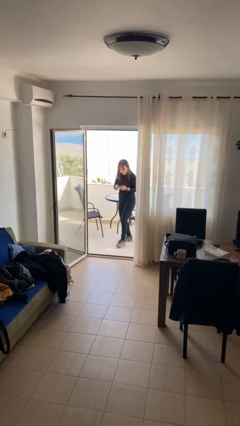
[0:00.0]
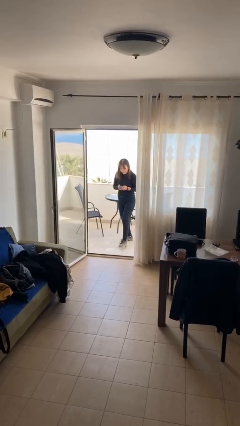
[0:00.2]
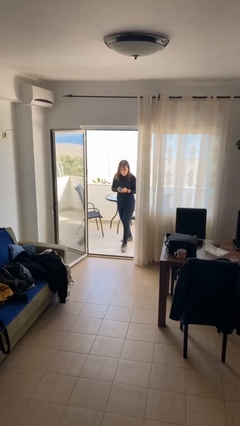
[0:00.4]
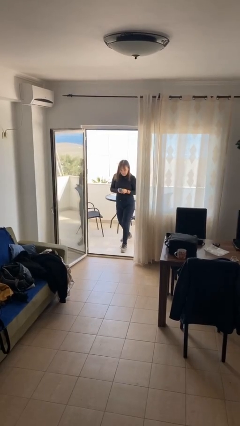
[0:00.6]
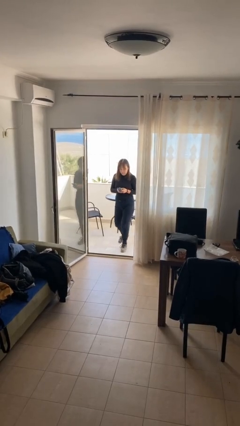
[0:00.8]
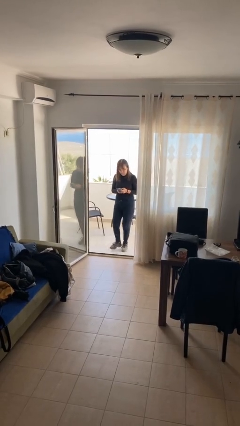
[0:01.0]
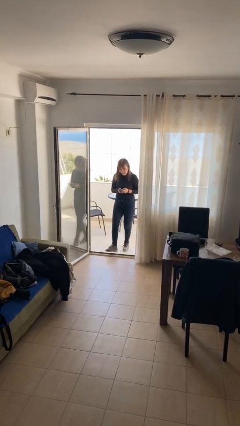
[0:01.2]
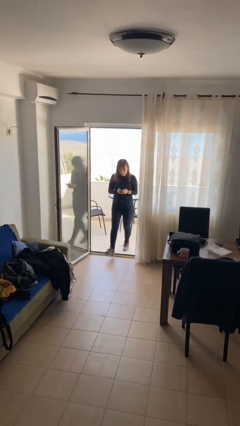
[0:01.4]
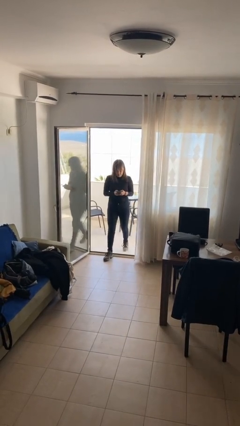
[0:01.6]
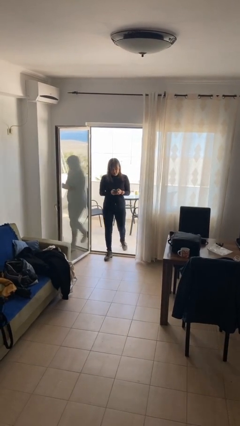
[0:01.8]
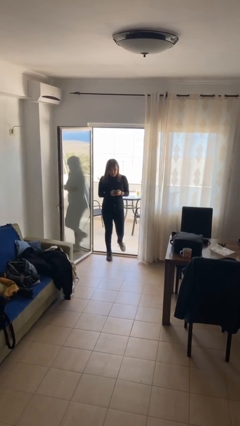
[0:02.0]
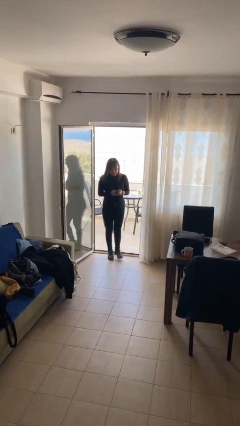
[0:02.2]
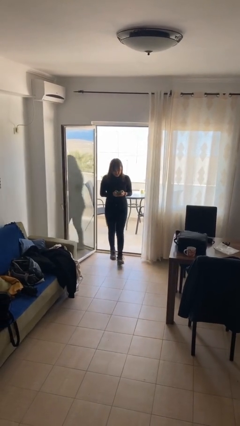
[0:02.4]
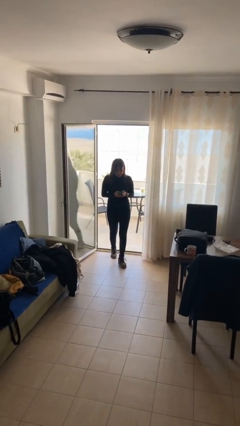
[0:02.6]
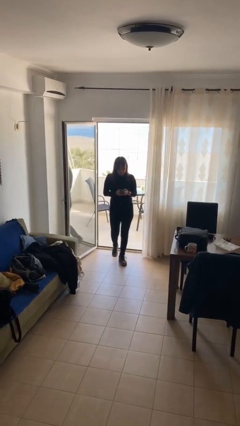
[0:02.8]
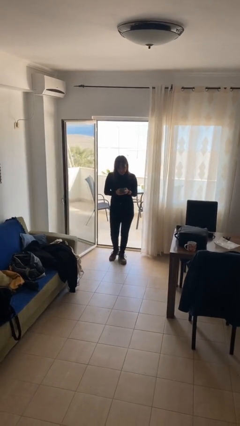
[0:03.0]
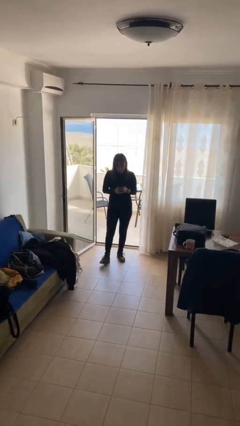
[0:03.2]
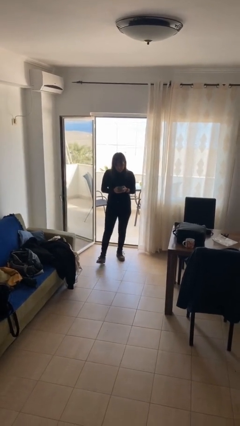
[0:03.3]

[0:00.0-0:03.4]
person enters scene through structure

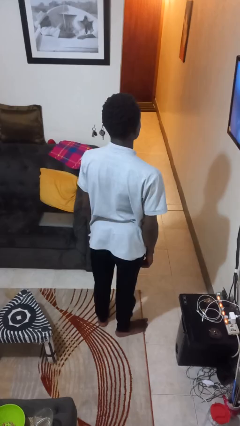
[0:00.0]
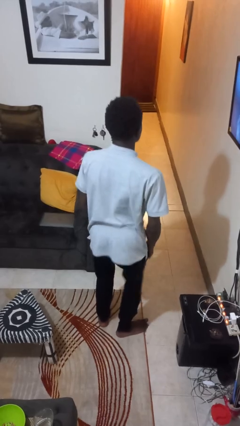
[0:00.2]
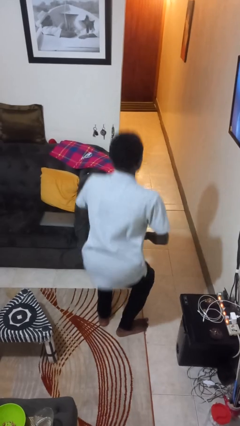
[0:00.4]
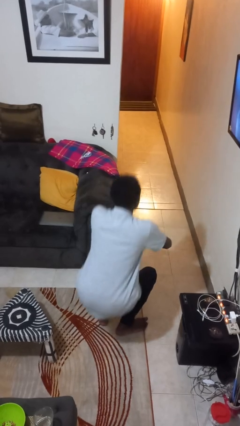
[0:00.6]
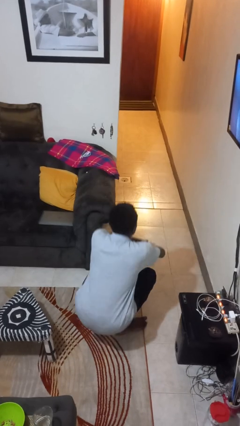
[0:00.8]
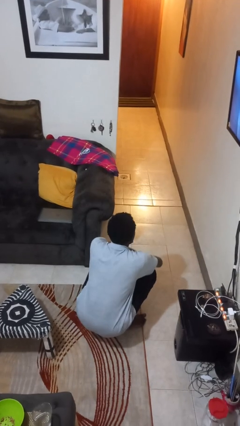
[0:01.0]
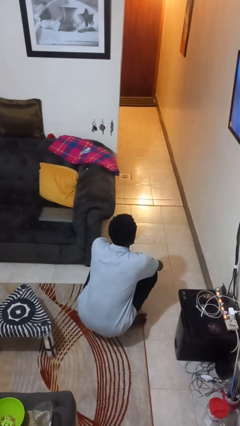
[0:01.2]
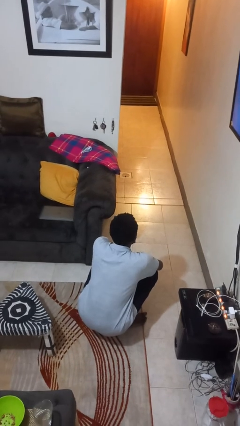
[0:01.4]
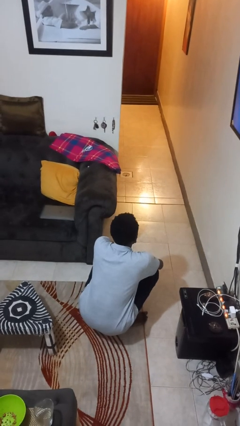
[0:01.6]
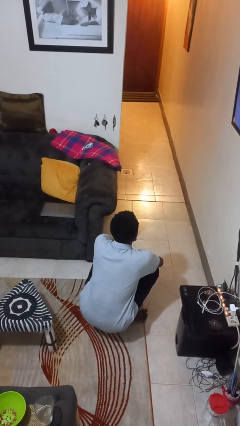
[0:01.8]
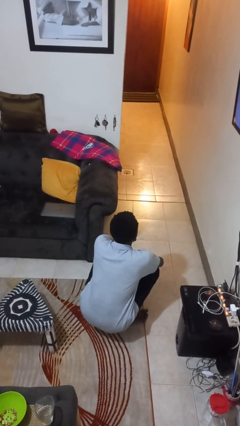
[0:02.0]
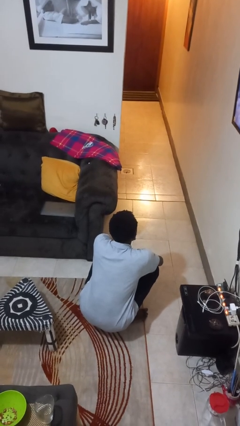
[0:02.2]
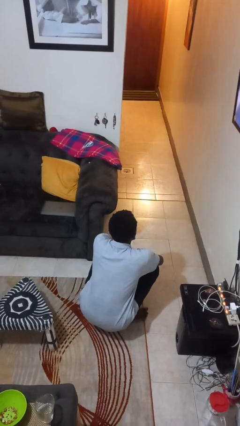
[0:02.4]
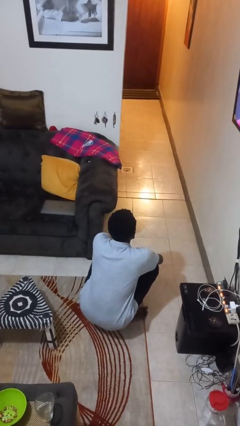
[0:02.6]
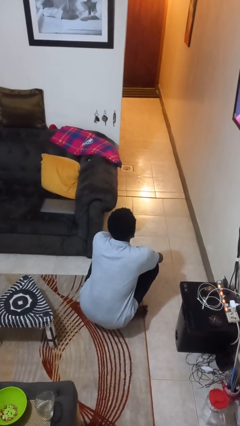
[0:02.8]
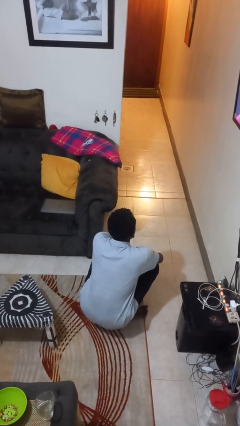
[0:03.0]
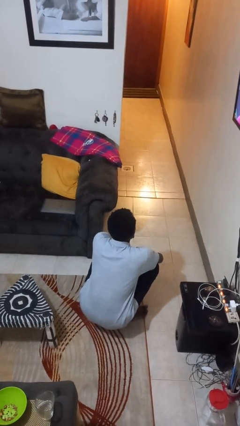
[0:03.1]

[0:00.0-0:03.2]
person squats

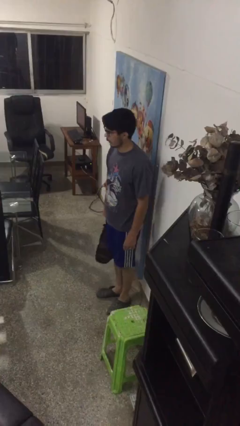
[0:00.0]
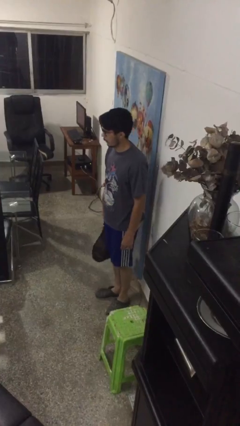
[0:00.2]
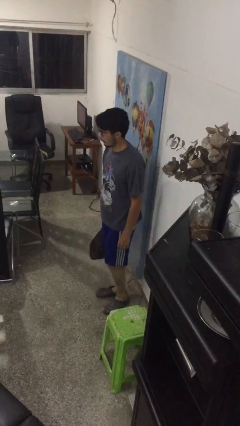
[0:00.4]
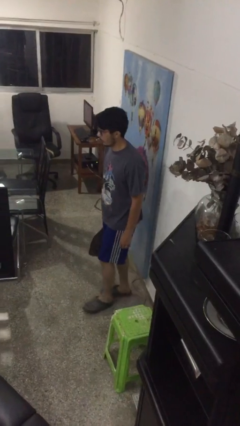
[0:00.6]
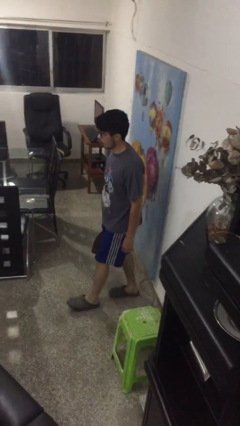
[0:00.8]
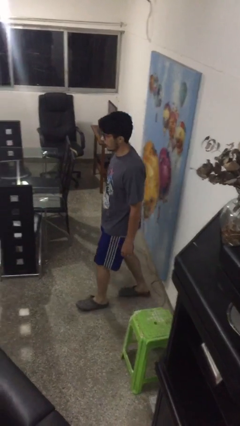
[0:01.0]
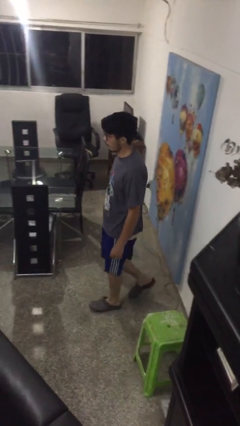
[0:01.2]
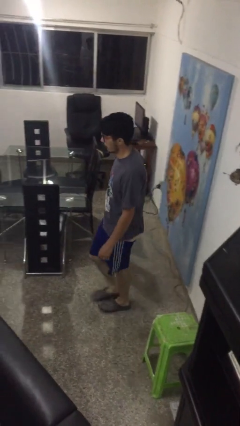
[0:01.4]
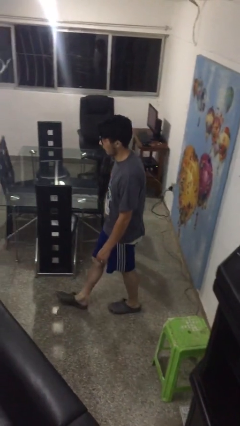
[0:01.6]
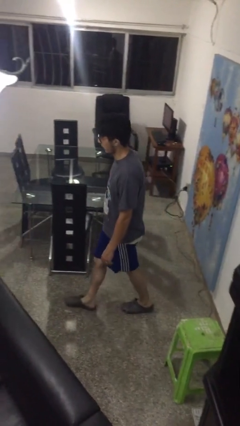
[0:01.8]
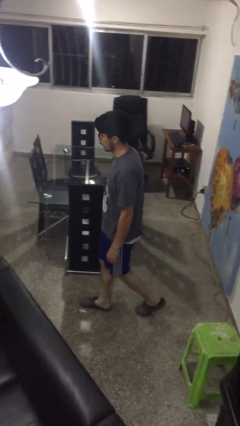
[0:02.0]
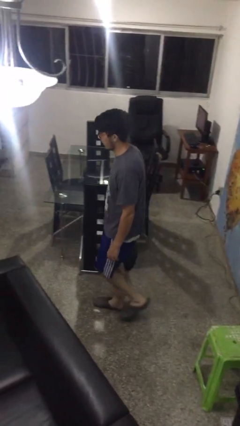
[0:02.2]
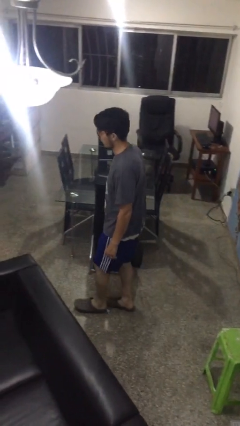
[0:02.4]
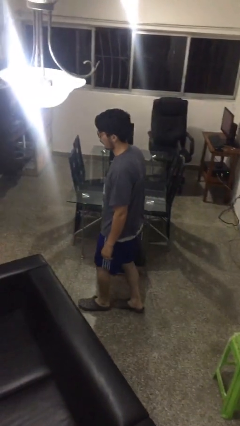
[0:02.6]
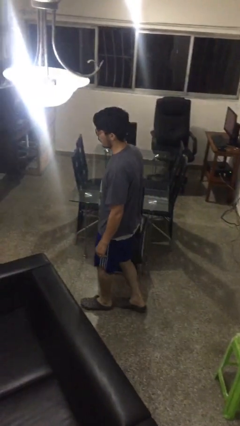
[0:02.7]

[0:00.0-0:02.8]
person carries groceries

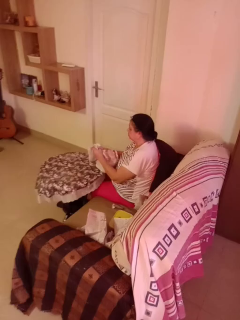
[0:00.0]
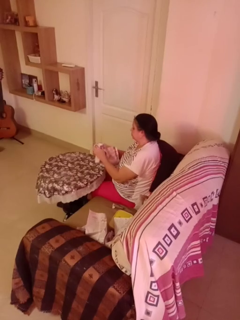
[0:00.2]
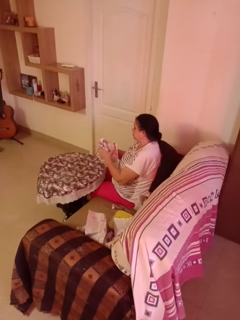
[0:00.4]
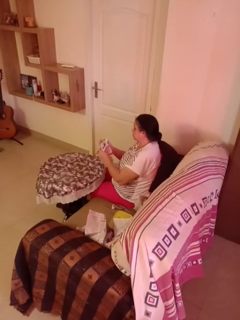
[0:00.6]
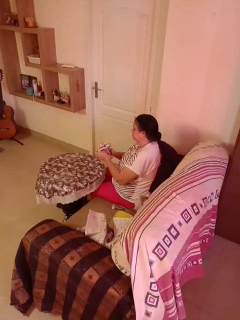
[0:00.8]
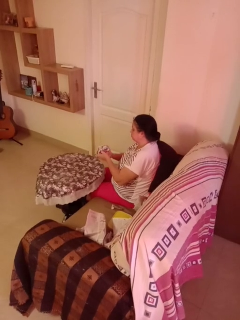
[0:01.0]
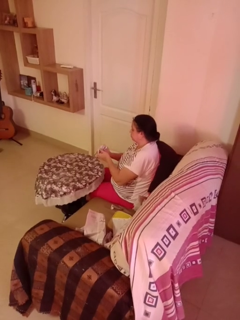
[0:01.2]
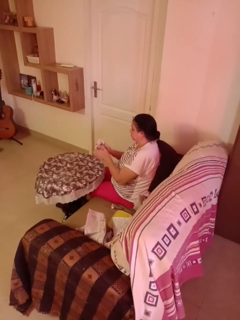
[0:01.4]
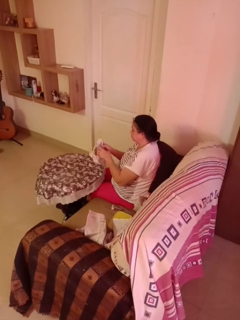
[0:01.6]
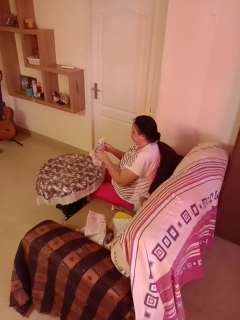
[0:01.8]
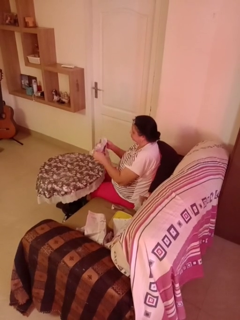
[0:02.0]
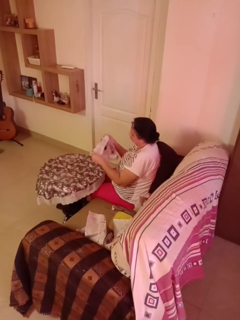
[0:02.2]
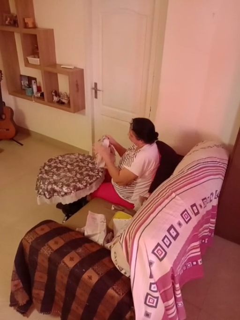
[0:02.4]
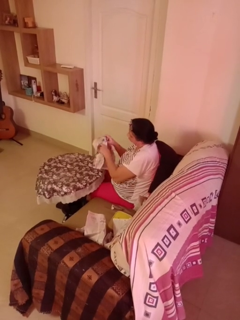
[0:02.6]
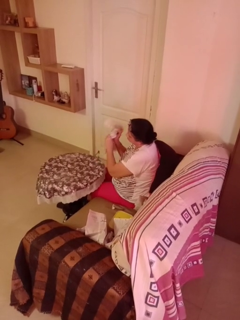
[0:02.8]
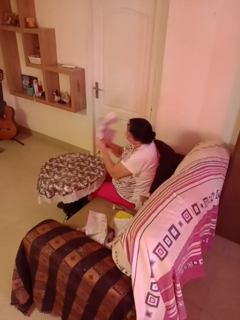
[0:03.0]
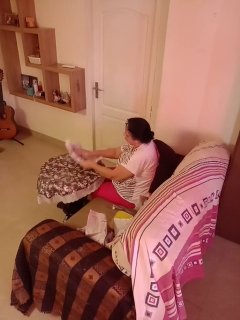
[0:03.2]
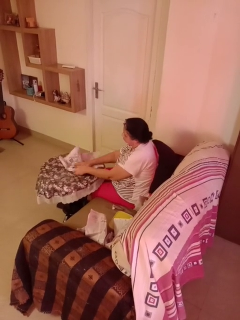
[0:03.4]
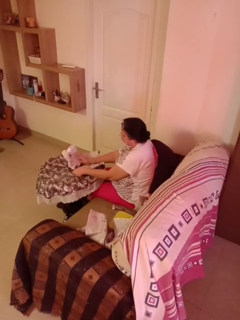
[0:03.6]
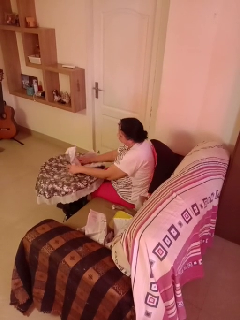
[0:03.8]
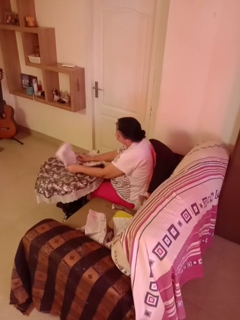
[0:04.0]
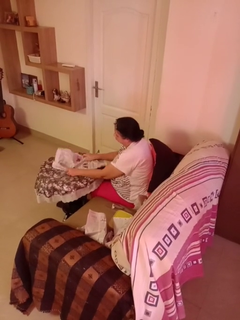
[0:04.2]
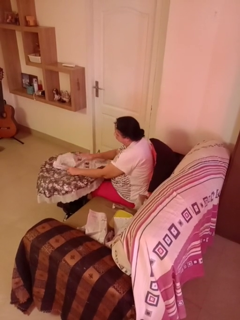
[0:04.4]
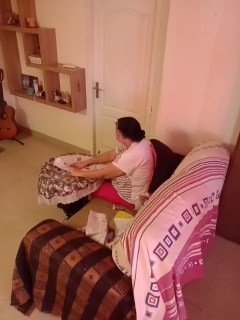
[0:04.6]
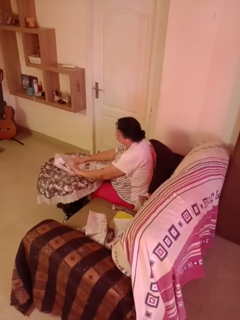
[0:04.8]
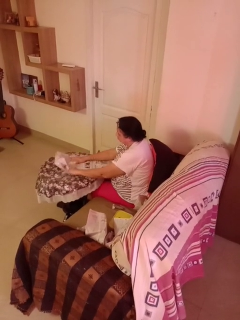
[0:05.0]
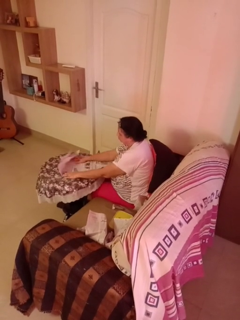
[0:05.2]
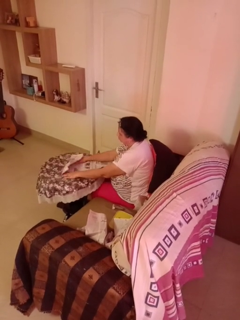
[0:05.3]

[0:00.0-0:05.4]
person crumples paper

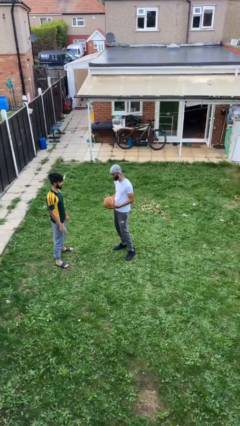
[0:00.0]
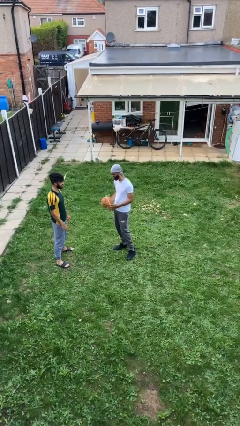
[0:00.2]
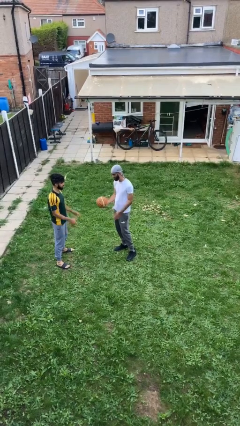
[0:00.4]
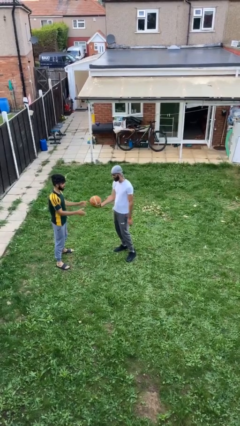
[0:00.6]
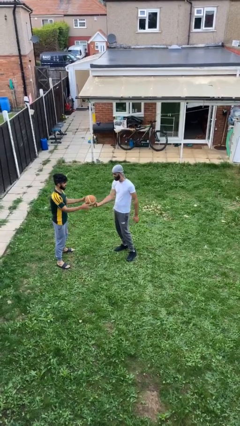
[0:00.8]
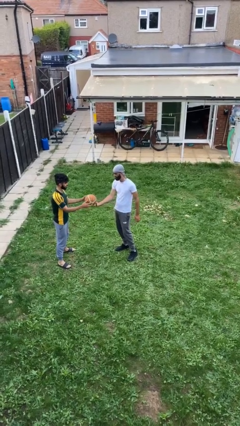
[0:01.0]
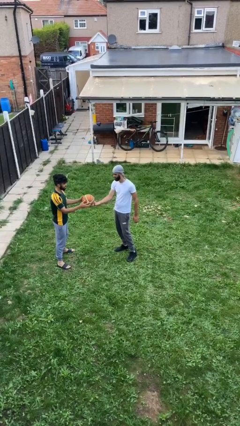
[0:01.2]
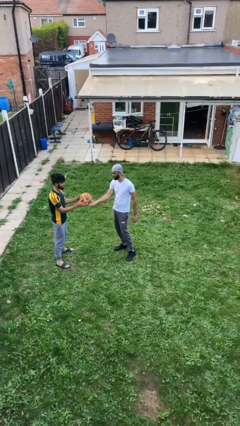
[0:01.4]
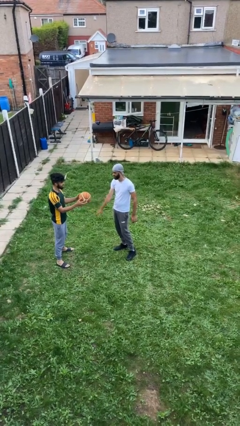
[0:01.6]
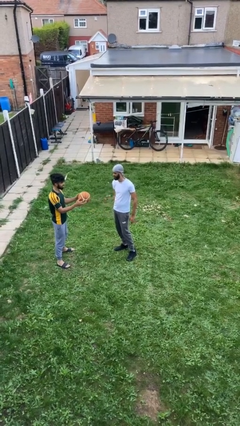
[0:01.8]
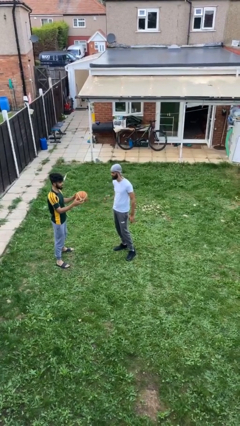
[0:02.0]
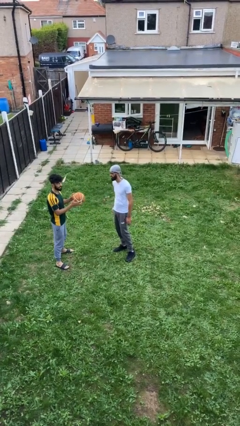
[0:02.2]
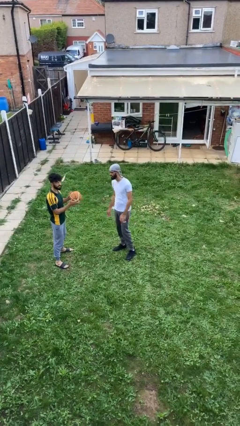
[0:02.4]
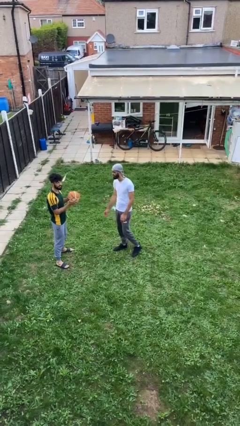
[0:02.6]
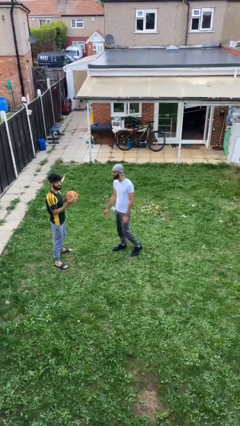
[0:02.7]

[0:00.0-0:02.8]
person transfers object to person

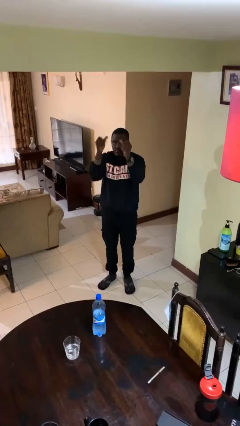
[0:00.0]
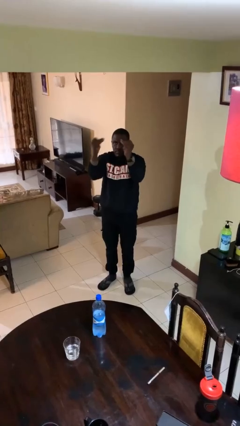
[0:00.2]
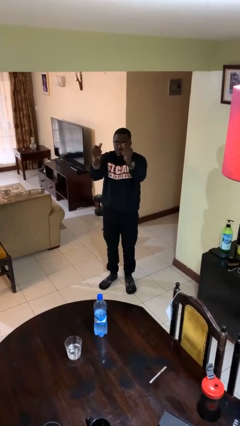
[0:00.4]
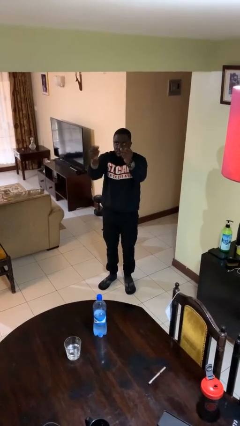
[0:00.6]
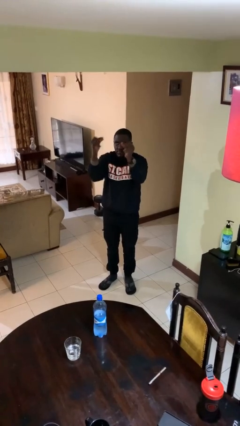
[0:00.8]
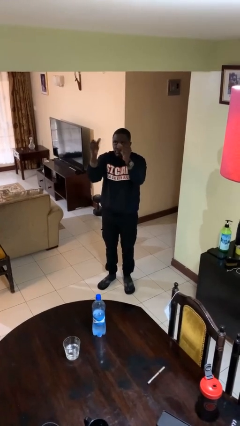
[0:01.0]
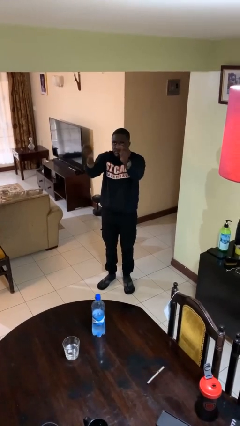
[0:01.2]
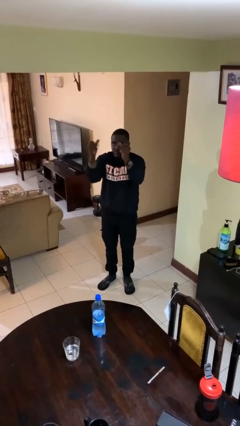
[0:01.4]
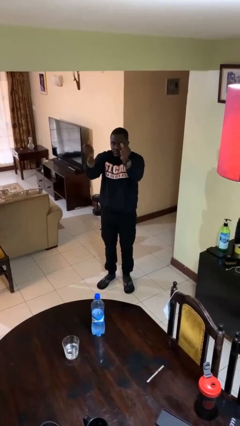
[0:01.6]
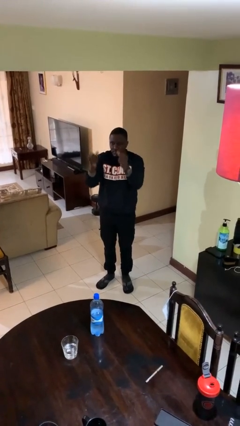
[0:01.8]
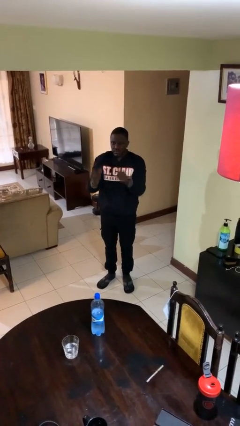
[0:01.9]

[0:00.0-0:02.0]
person snaps fingers
